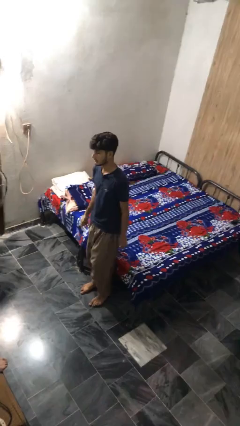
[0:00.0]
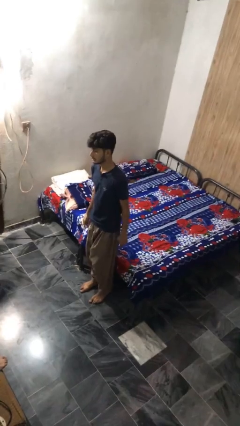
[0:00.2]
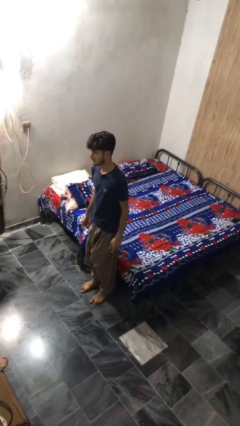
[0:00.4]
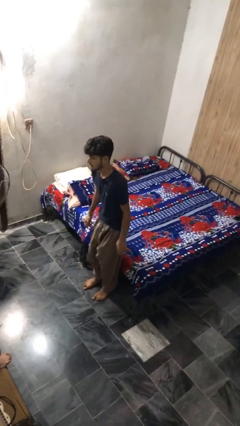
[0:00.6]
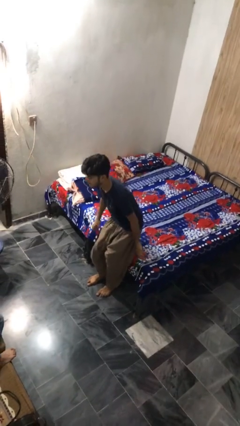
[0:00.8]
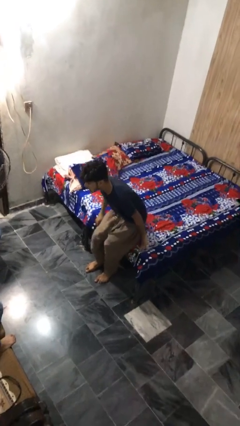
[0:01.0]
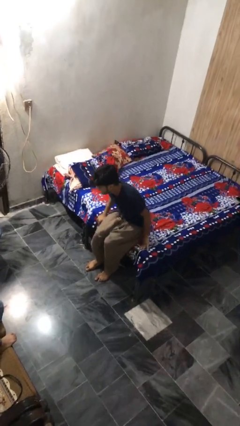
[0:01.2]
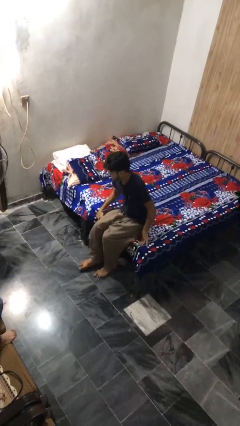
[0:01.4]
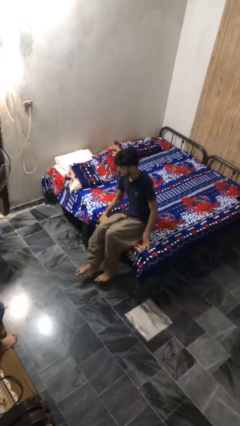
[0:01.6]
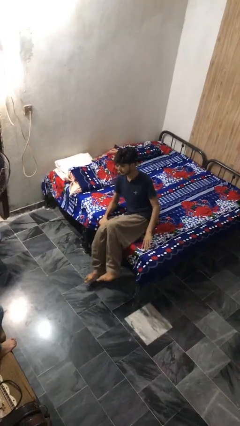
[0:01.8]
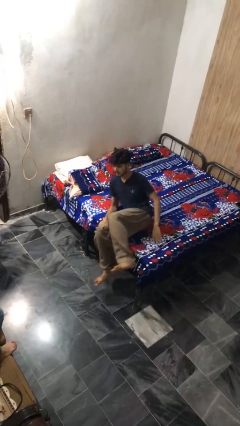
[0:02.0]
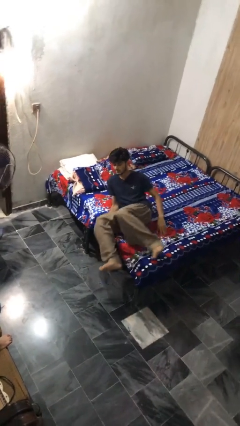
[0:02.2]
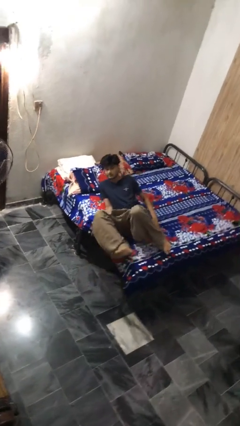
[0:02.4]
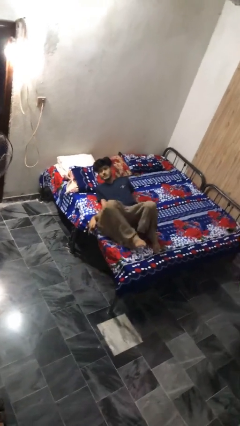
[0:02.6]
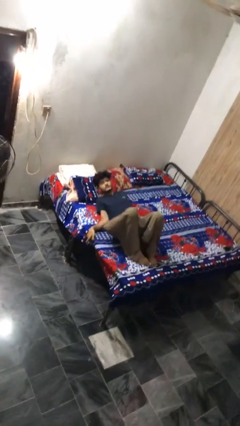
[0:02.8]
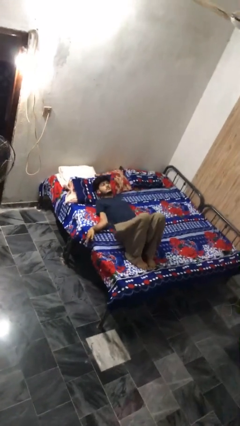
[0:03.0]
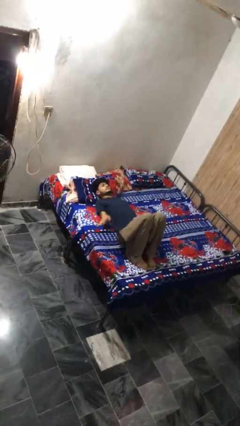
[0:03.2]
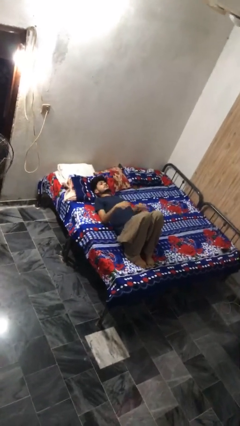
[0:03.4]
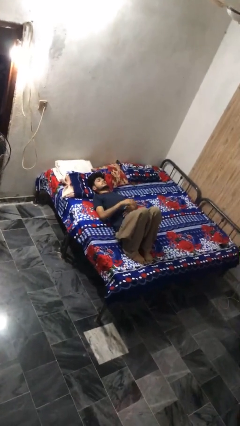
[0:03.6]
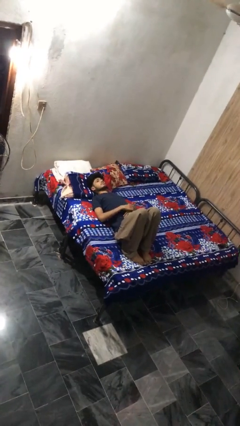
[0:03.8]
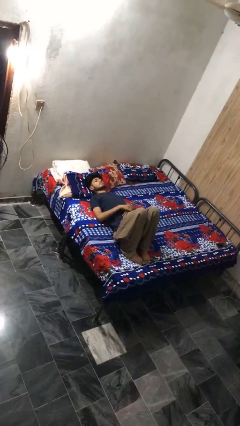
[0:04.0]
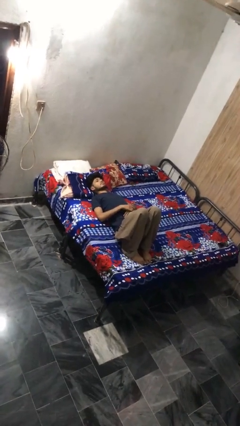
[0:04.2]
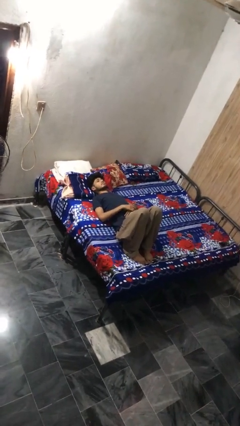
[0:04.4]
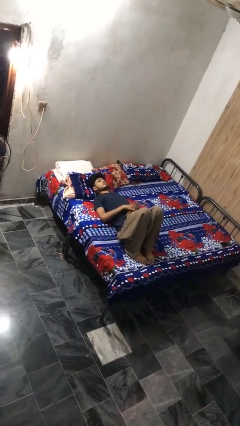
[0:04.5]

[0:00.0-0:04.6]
person lies down on bed

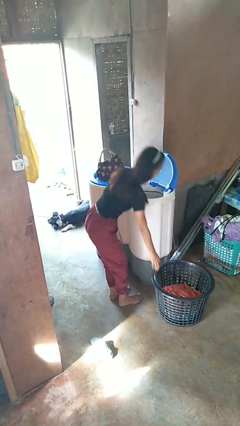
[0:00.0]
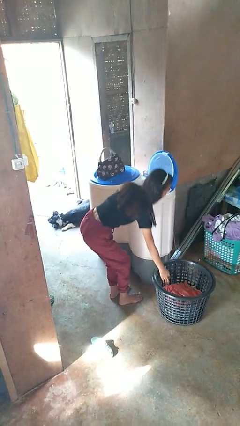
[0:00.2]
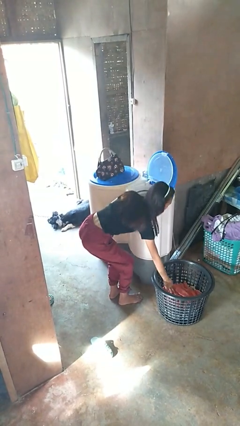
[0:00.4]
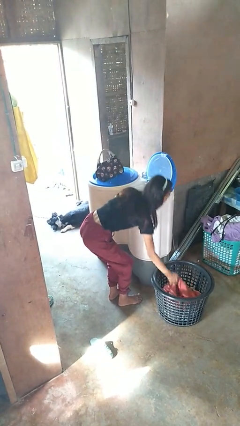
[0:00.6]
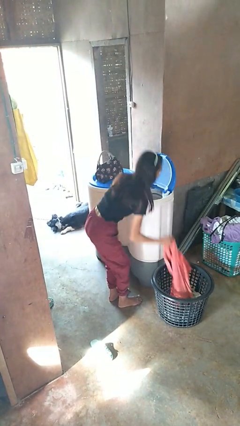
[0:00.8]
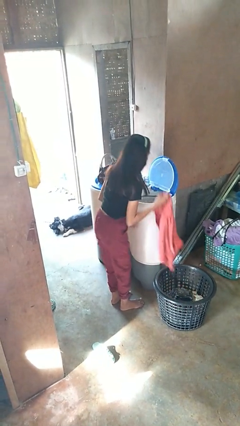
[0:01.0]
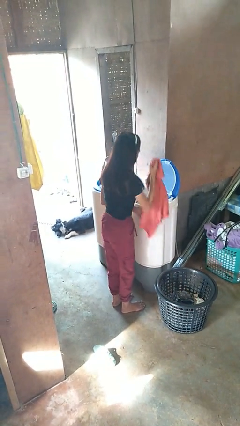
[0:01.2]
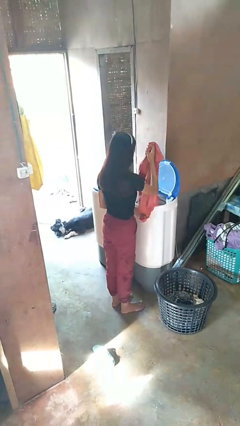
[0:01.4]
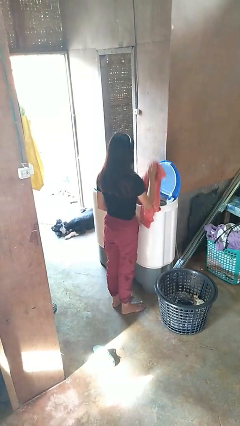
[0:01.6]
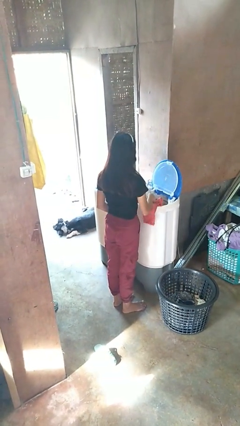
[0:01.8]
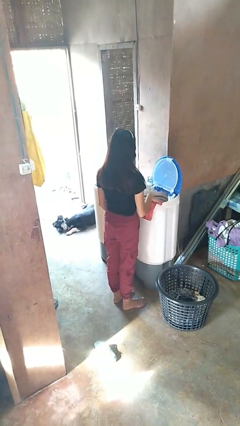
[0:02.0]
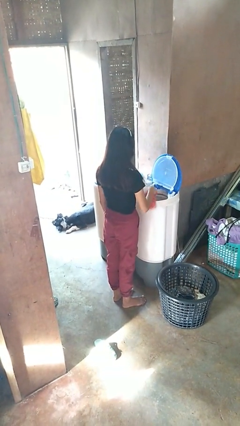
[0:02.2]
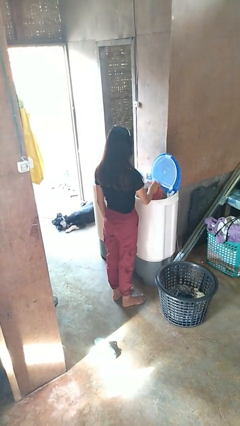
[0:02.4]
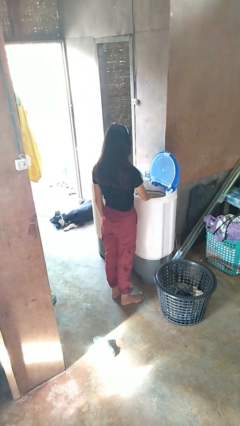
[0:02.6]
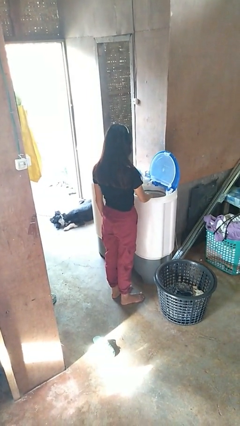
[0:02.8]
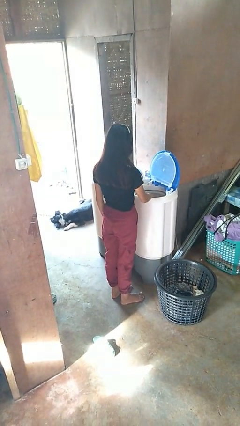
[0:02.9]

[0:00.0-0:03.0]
person loads clotheswasher

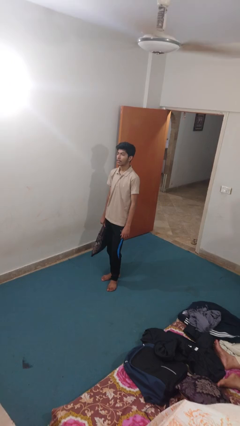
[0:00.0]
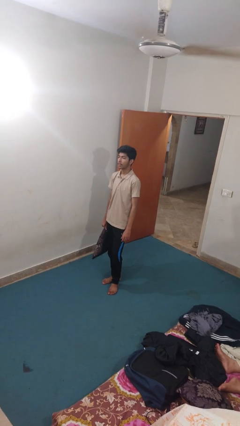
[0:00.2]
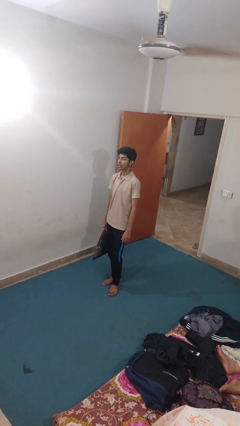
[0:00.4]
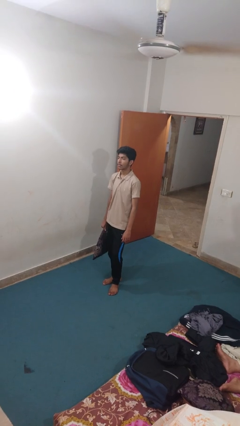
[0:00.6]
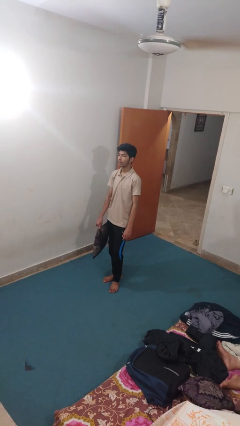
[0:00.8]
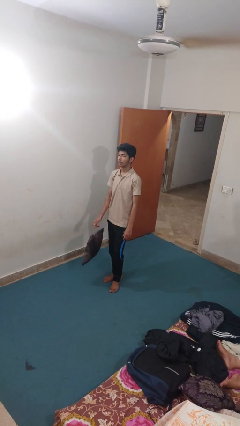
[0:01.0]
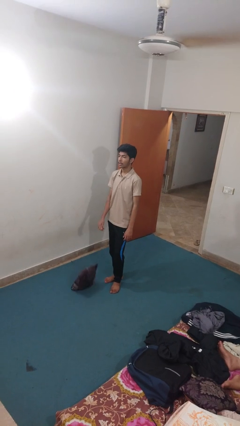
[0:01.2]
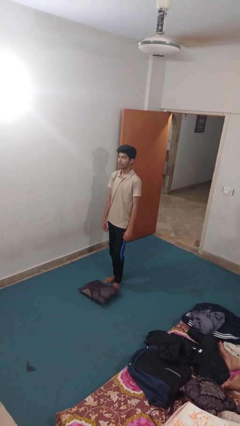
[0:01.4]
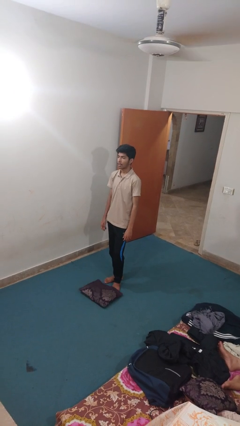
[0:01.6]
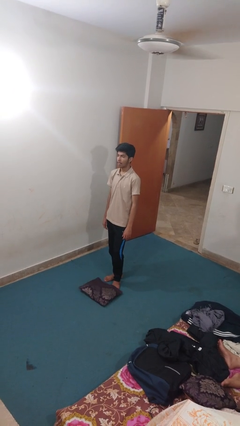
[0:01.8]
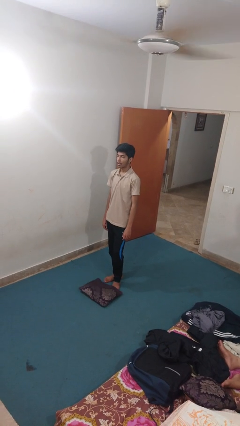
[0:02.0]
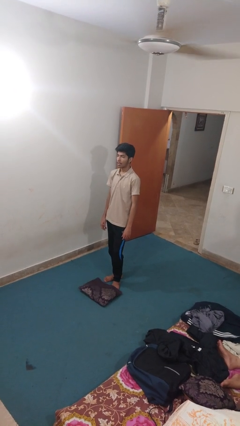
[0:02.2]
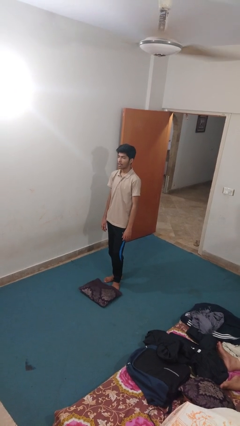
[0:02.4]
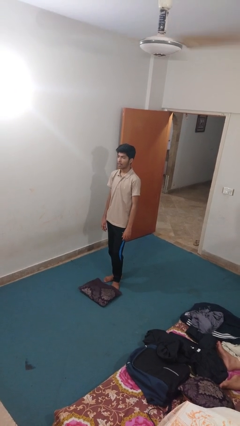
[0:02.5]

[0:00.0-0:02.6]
person drops object

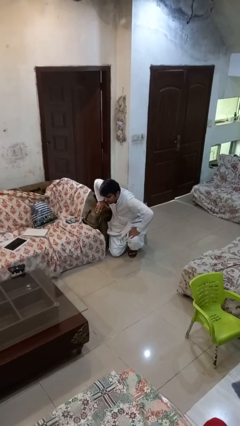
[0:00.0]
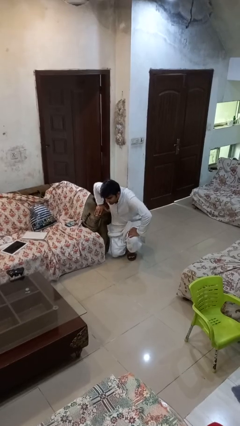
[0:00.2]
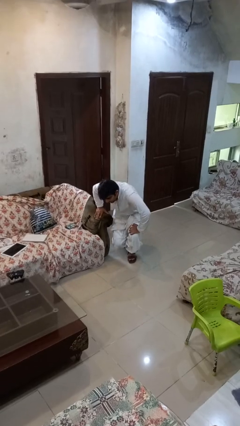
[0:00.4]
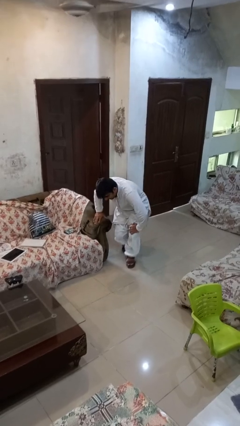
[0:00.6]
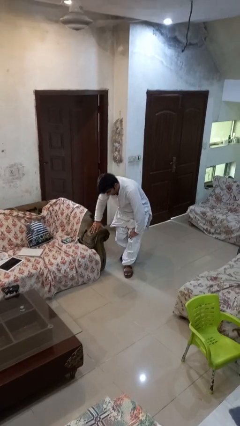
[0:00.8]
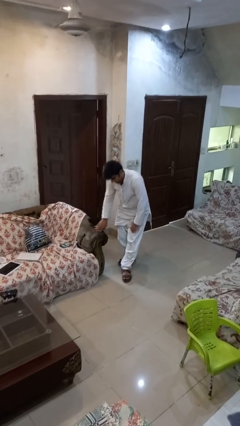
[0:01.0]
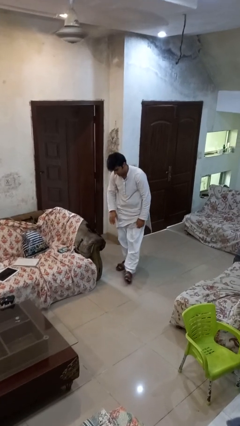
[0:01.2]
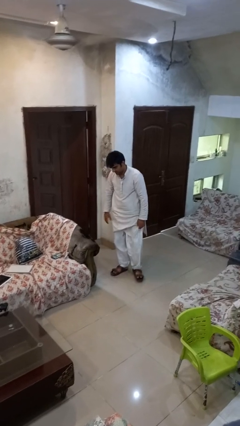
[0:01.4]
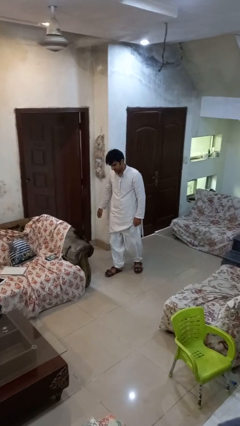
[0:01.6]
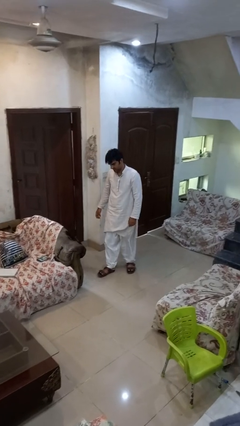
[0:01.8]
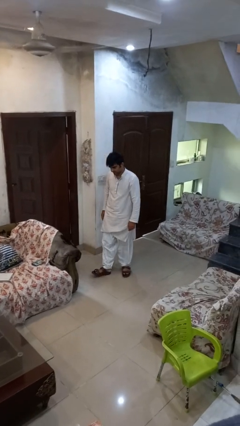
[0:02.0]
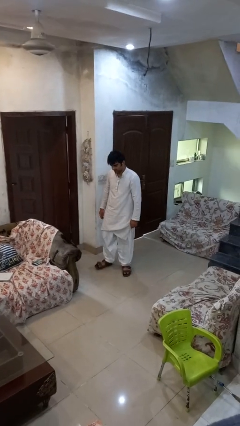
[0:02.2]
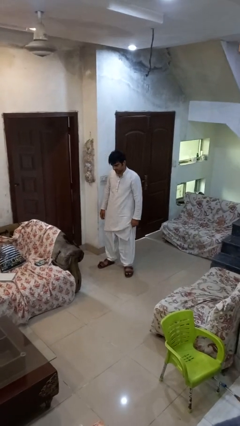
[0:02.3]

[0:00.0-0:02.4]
person stands up from floor

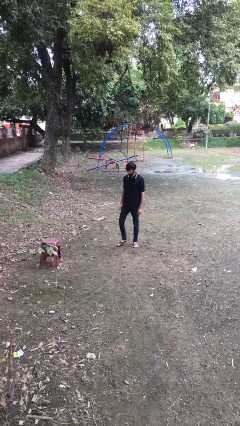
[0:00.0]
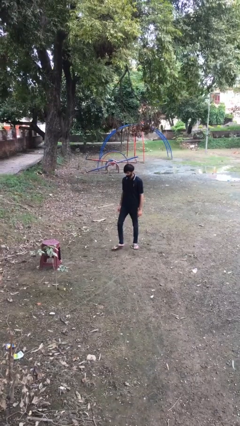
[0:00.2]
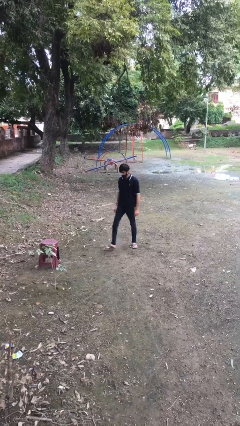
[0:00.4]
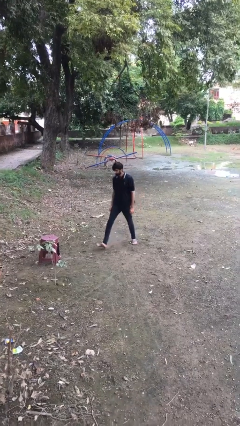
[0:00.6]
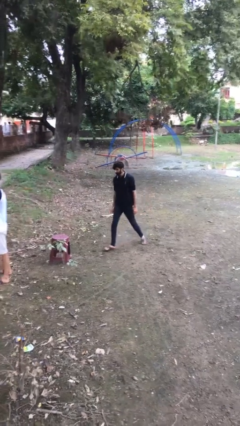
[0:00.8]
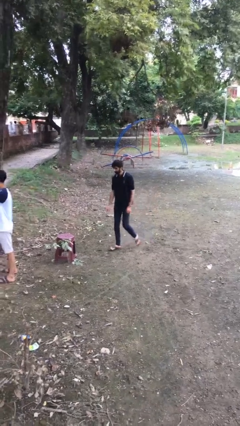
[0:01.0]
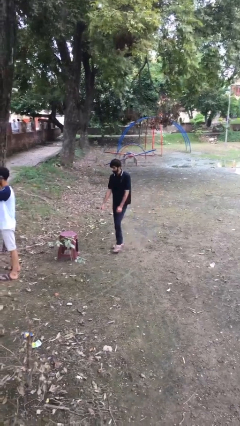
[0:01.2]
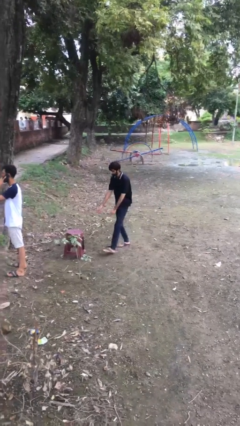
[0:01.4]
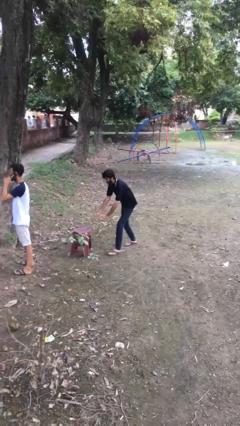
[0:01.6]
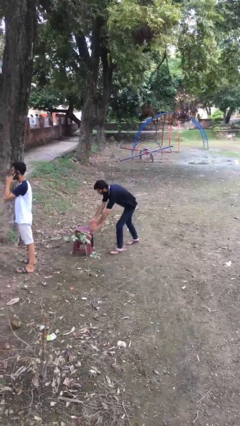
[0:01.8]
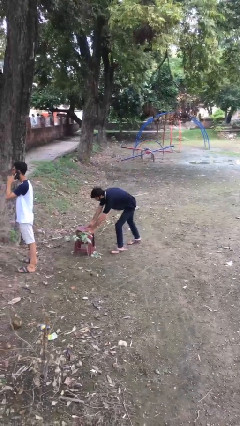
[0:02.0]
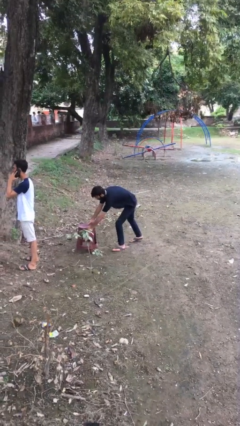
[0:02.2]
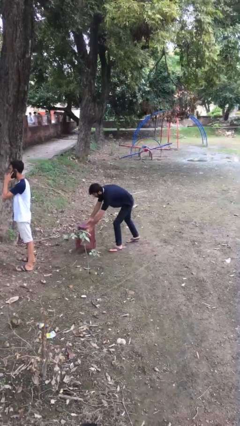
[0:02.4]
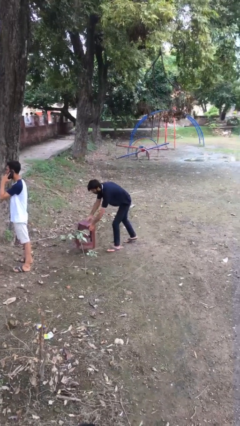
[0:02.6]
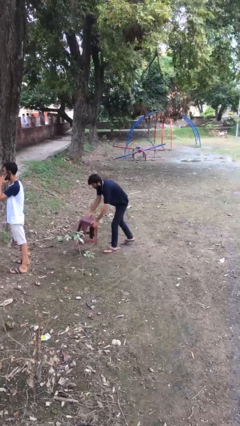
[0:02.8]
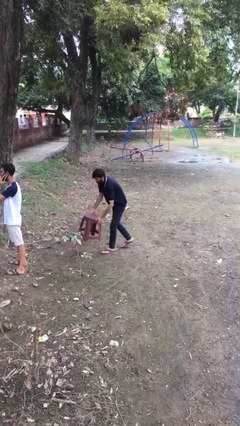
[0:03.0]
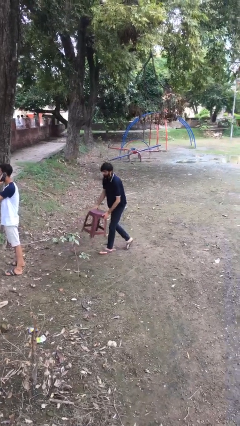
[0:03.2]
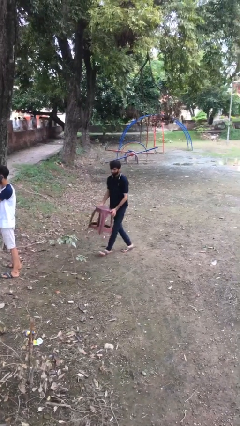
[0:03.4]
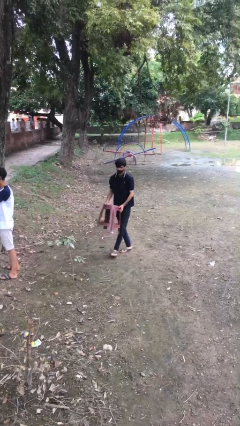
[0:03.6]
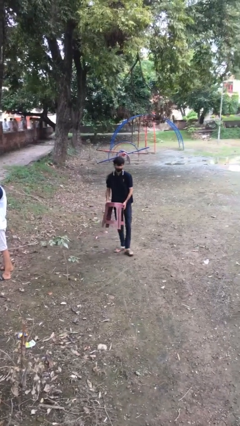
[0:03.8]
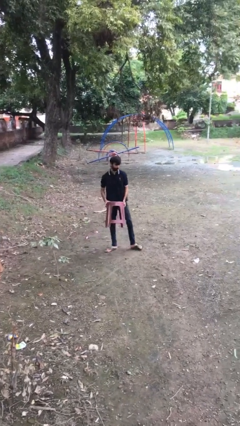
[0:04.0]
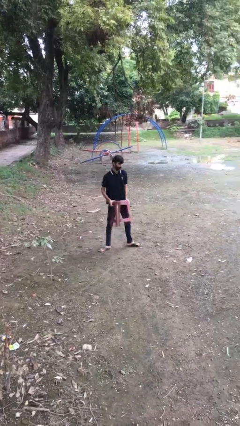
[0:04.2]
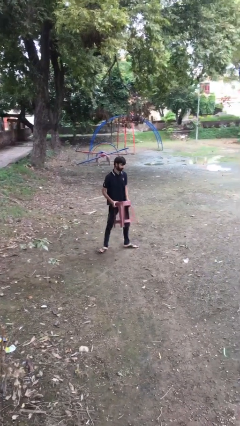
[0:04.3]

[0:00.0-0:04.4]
person steals object from person

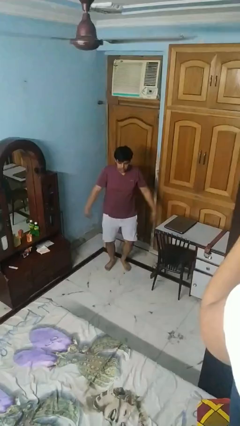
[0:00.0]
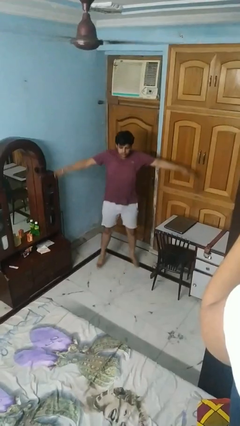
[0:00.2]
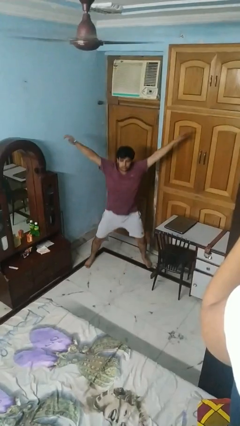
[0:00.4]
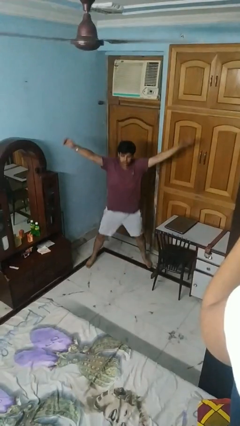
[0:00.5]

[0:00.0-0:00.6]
person exercises with jumping jacks
